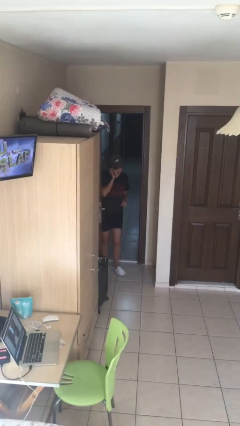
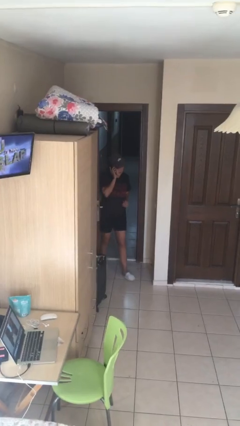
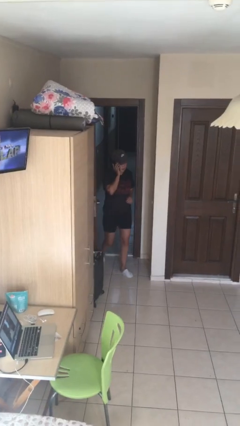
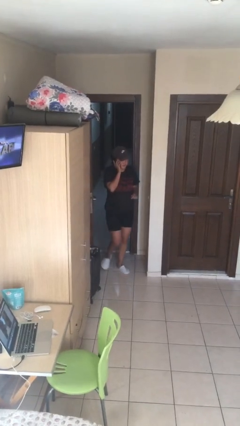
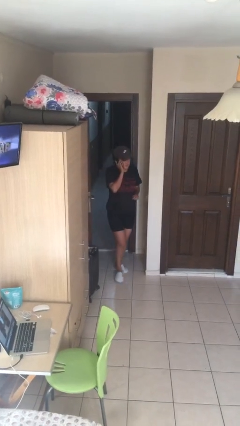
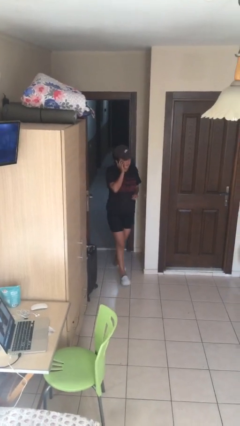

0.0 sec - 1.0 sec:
person enters scene through structure

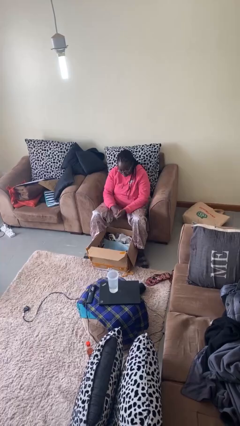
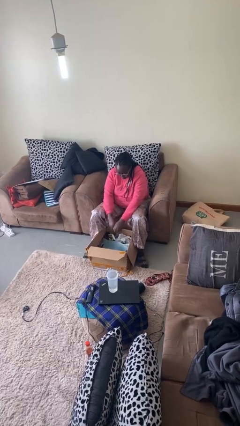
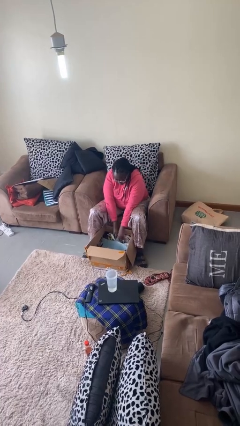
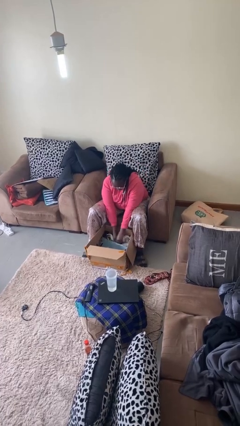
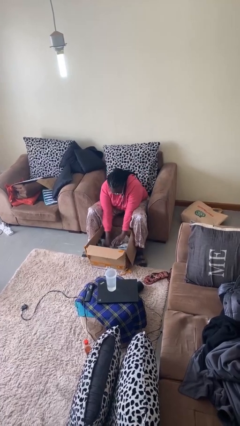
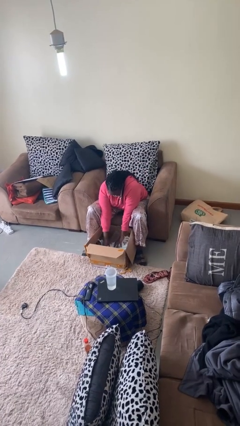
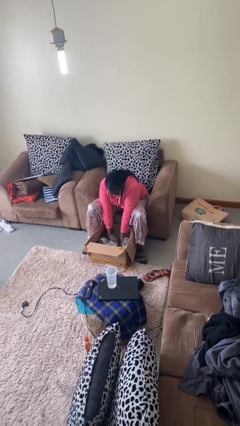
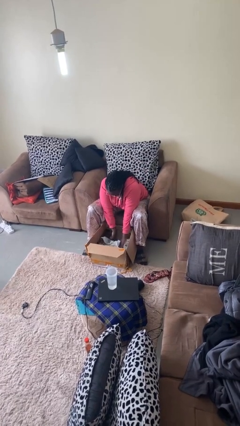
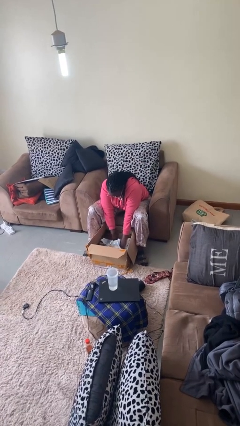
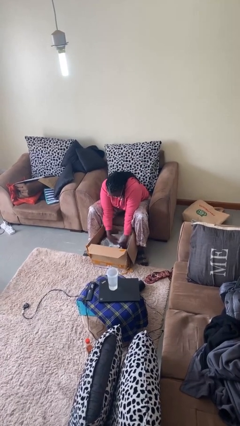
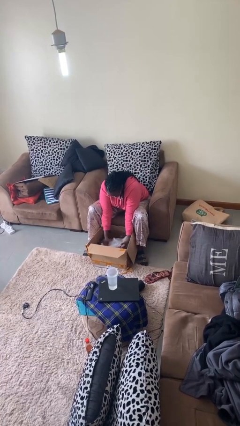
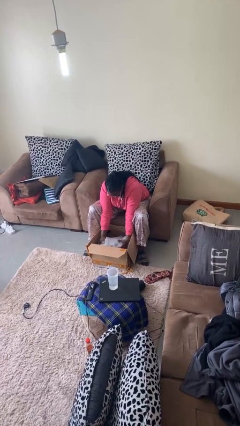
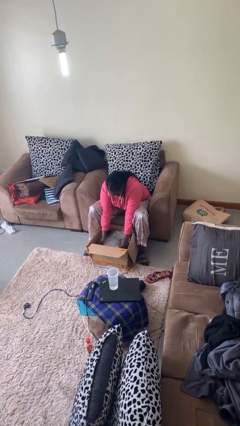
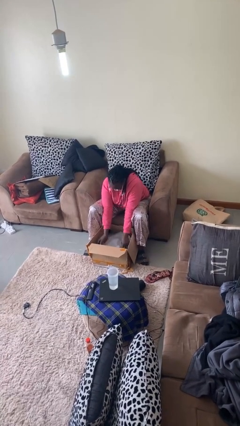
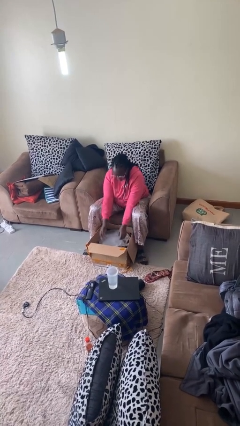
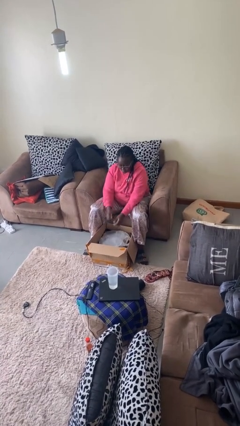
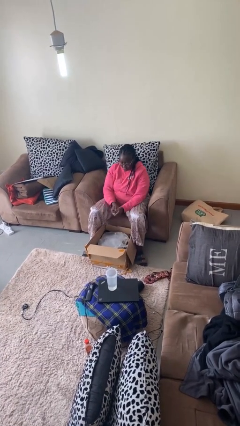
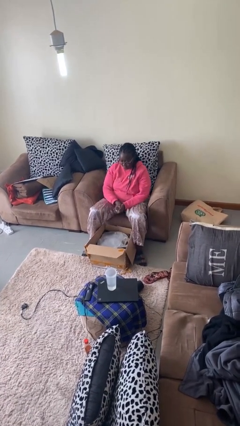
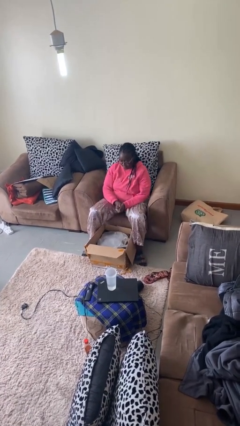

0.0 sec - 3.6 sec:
person searches in box

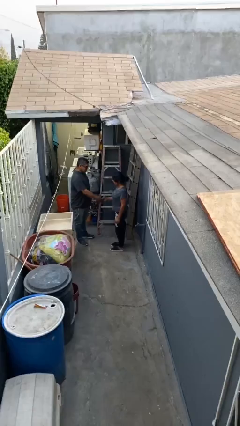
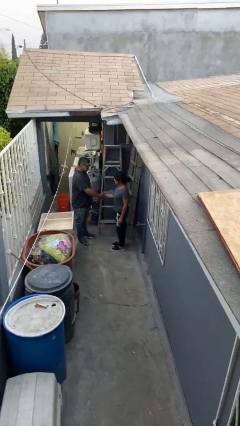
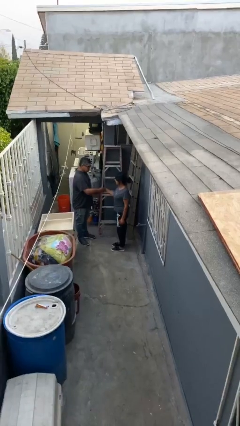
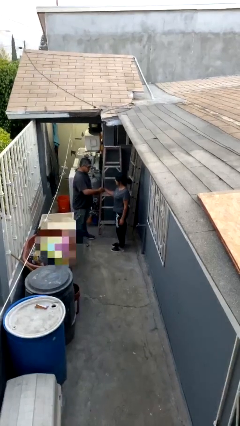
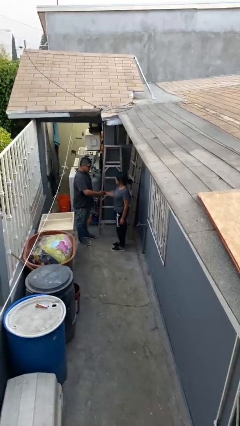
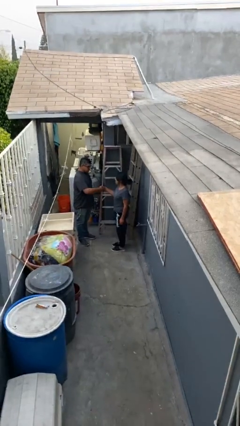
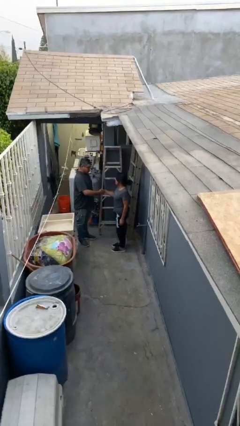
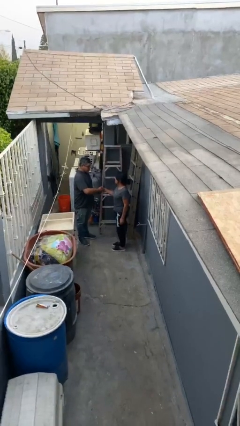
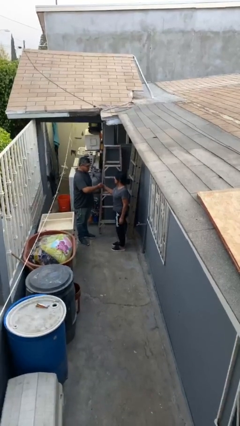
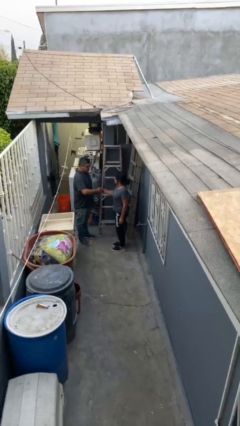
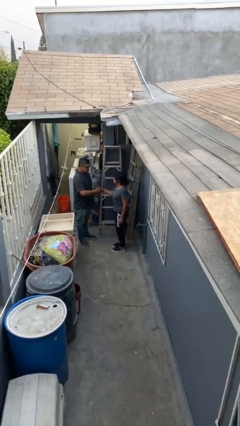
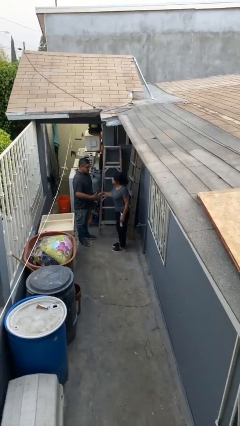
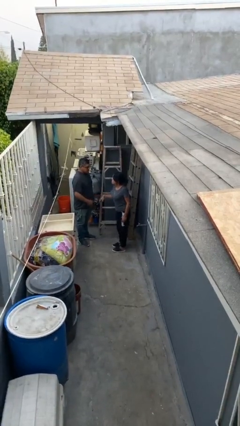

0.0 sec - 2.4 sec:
person shakes hand

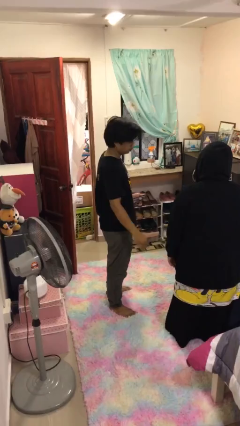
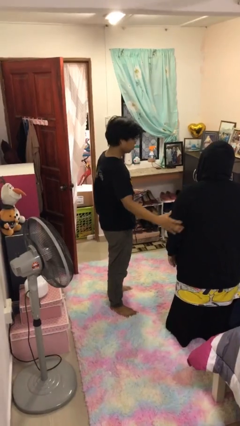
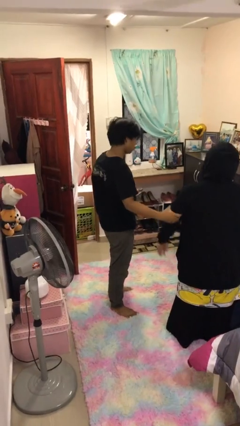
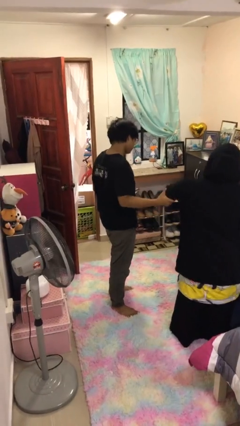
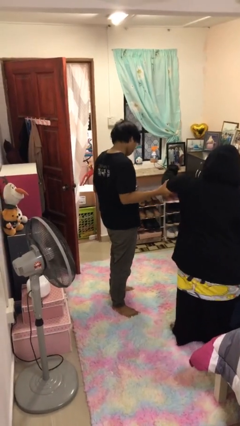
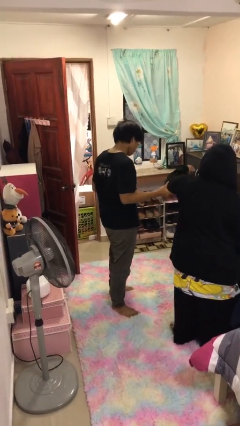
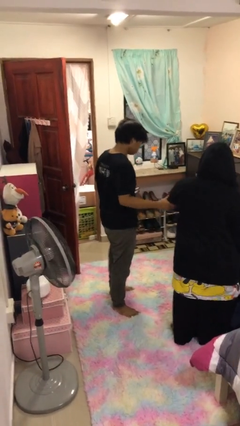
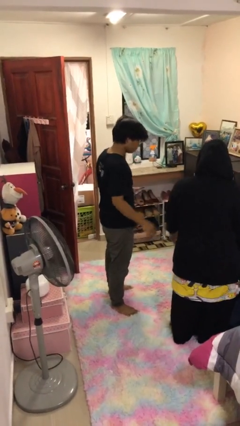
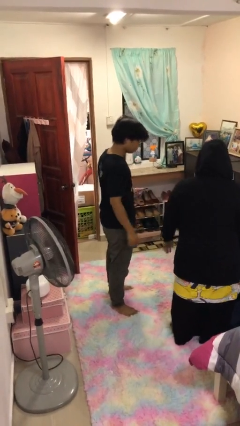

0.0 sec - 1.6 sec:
person grabs person by bicep

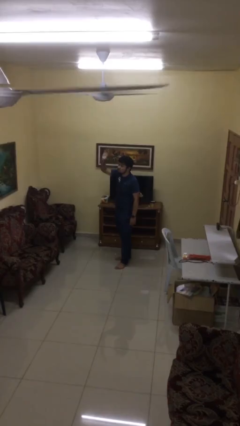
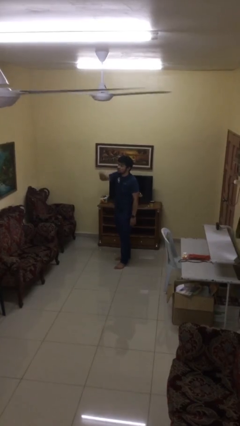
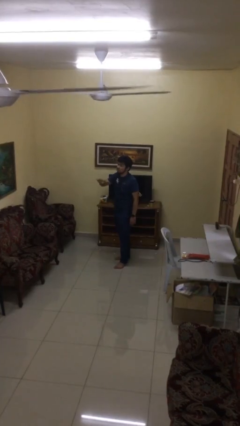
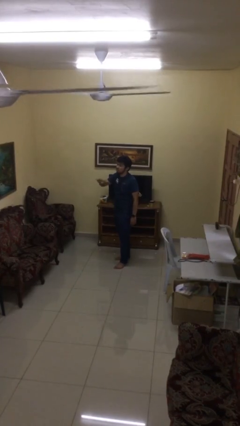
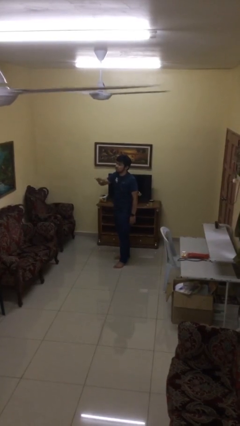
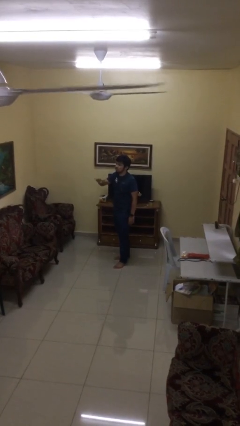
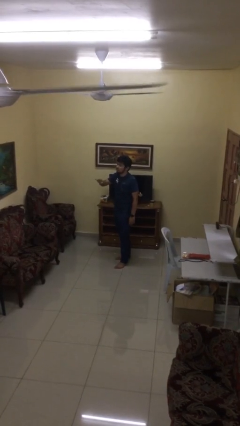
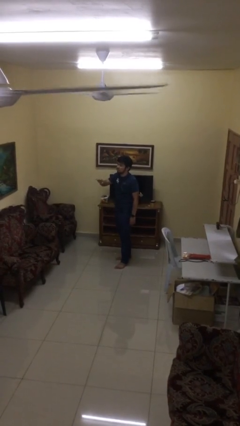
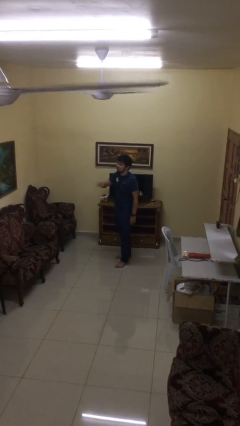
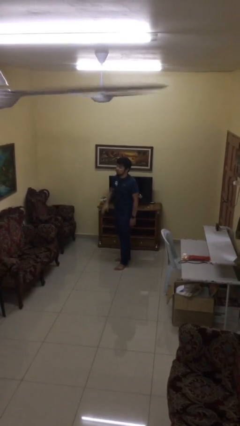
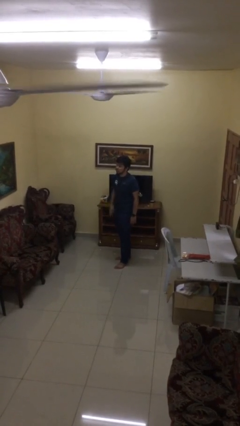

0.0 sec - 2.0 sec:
person gestures swipe down

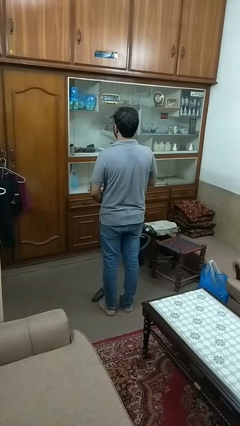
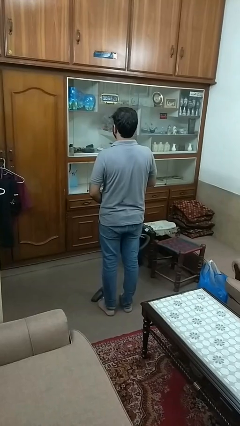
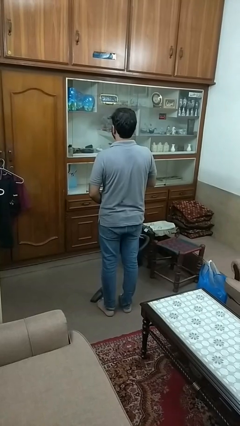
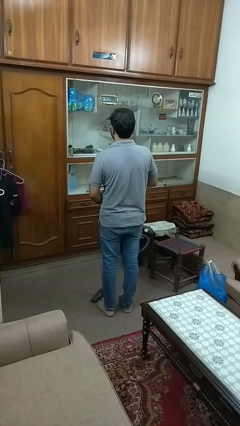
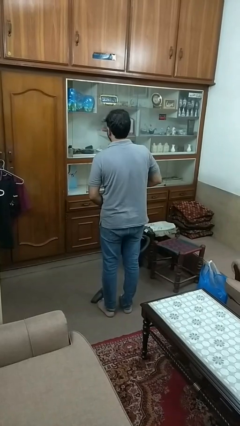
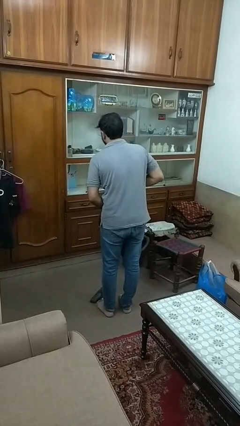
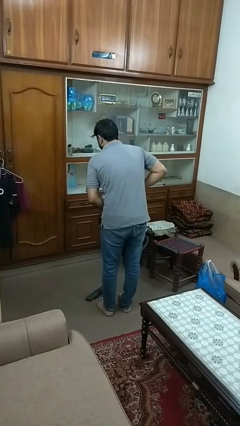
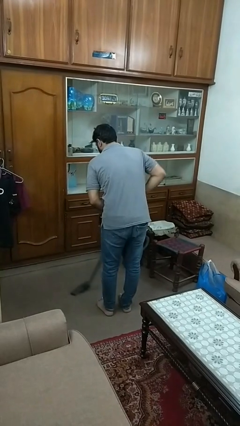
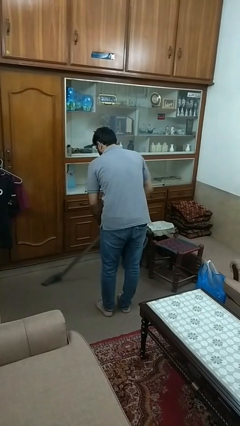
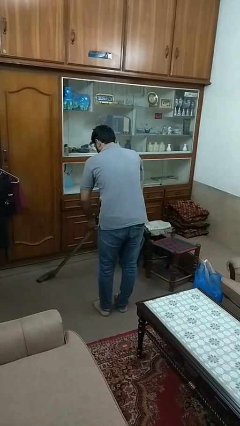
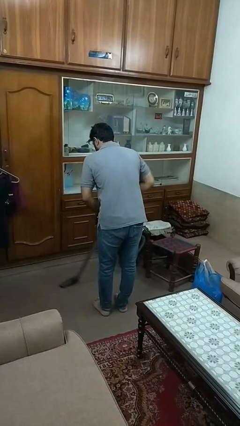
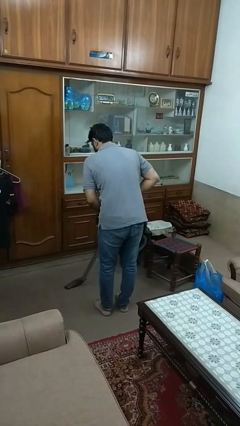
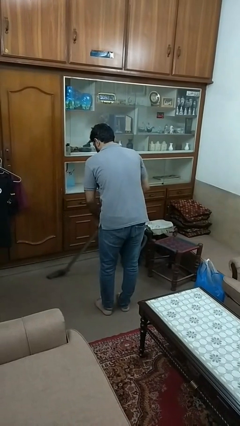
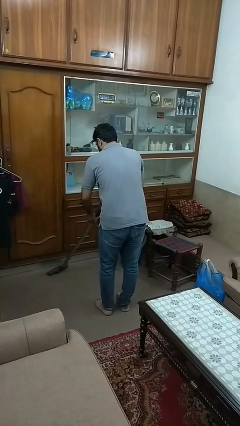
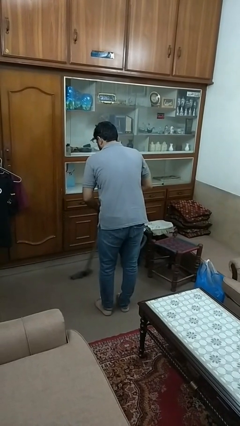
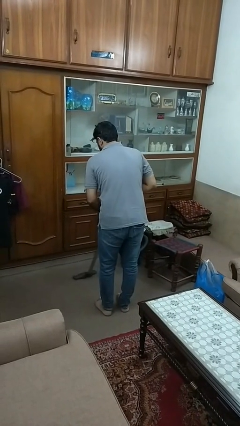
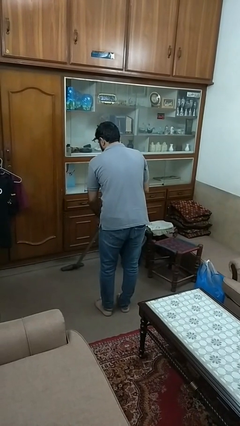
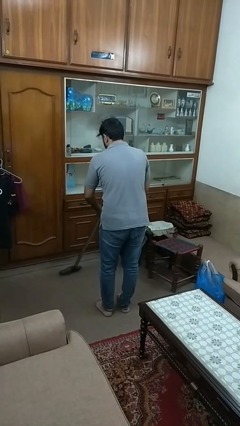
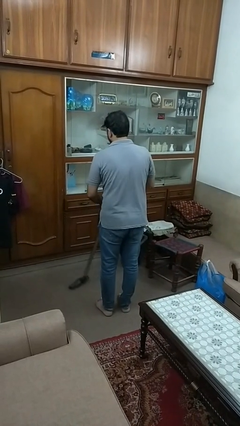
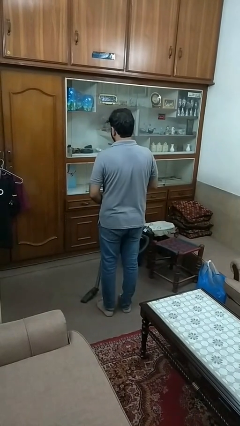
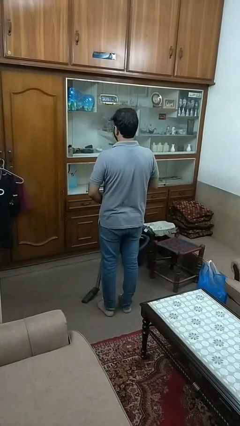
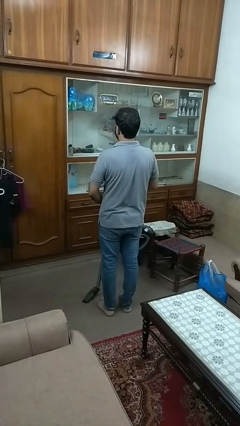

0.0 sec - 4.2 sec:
person vacuums carpet

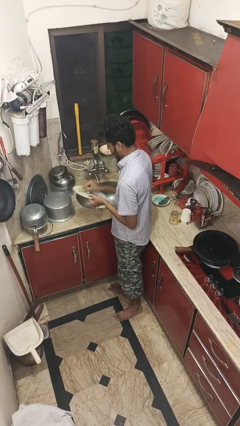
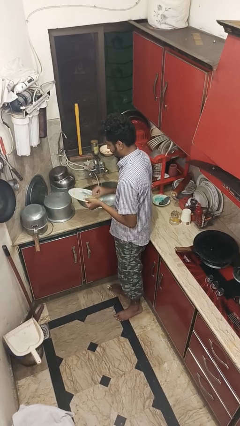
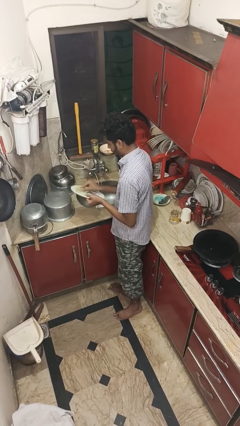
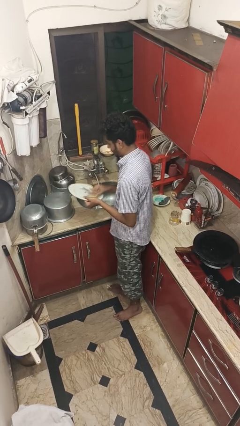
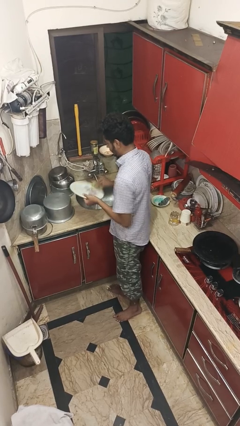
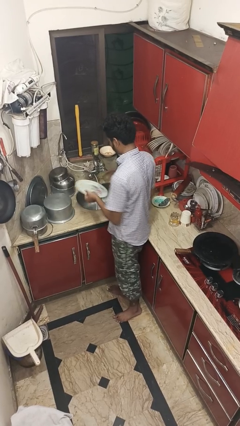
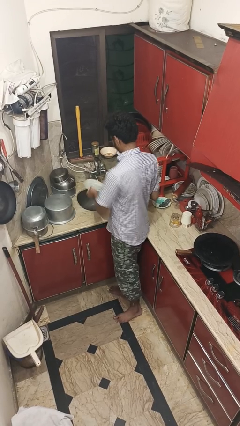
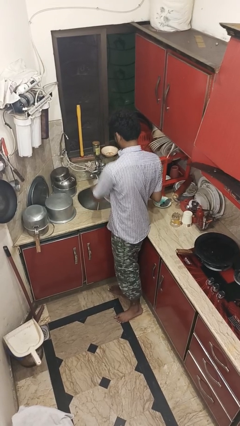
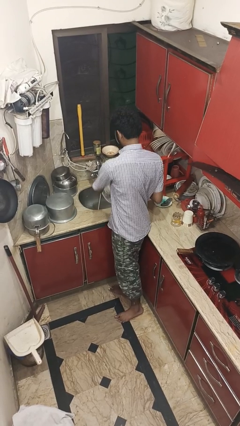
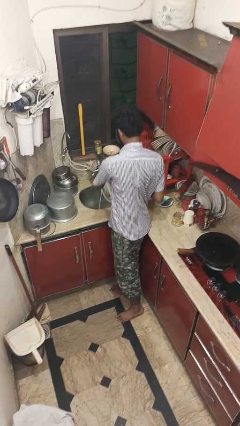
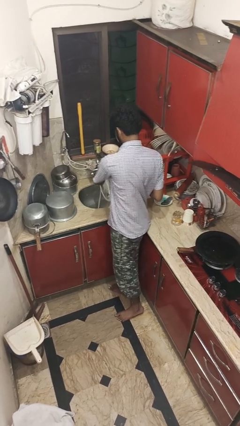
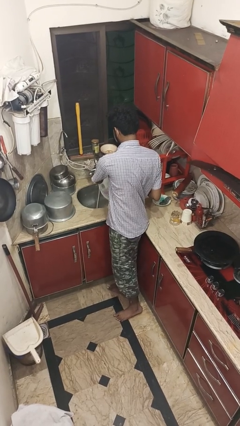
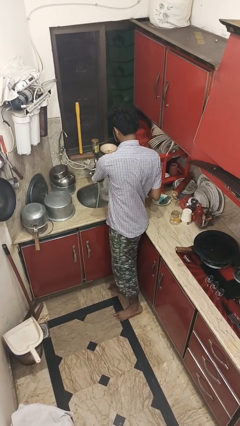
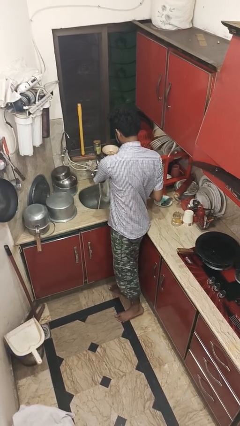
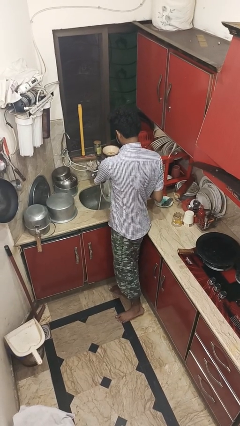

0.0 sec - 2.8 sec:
person washes dish
